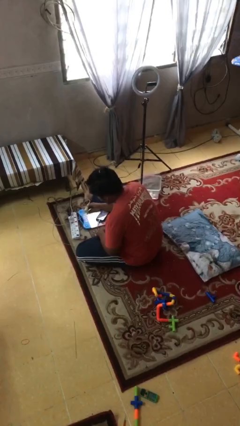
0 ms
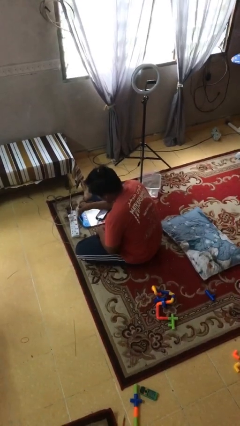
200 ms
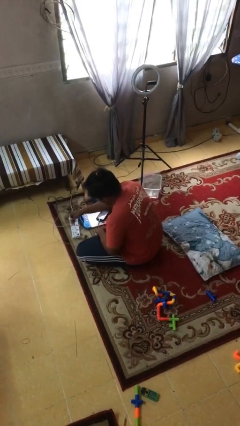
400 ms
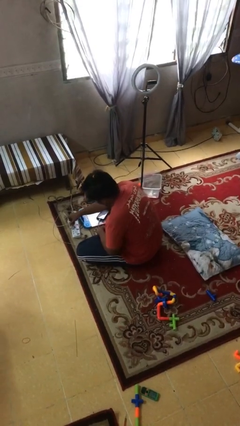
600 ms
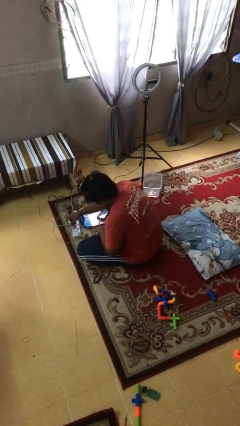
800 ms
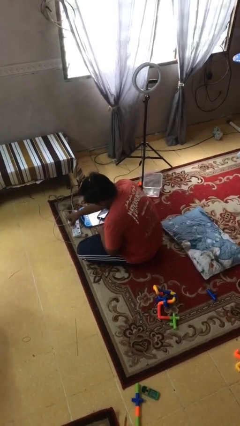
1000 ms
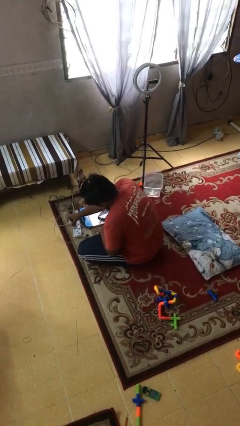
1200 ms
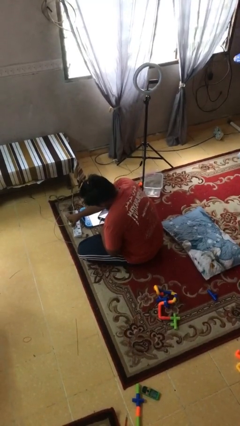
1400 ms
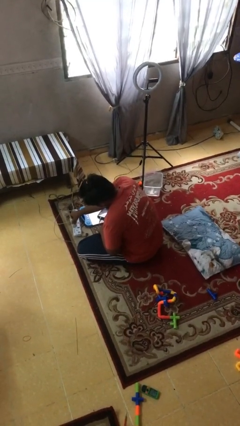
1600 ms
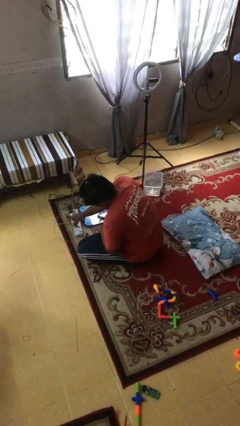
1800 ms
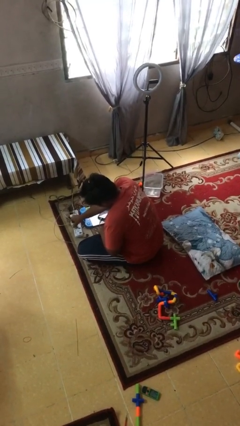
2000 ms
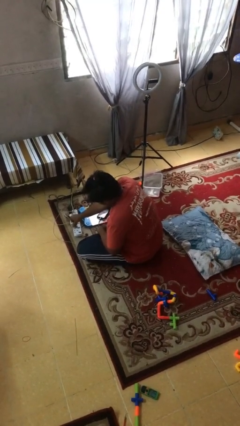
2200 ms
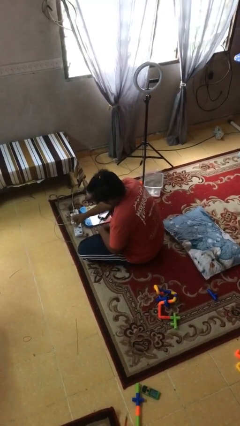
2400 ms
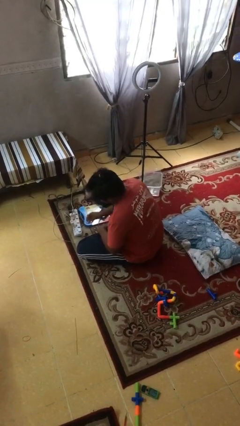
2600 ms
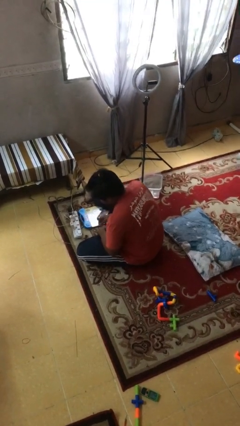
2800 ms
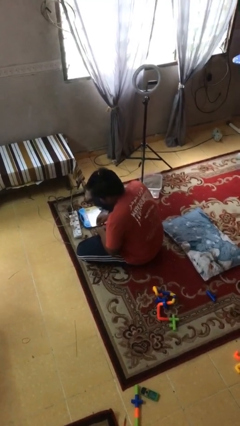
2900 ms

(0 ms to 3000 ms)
person plugs into electrical socket

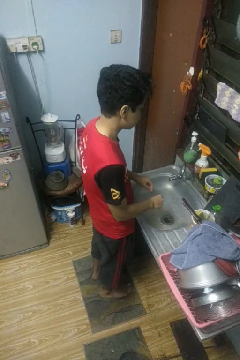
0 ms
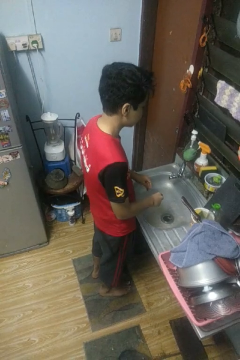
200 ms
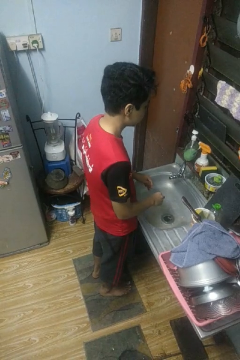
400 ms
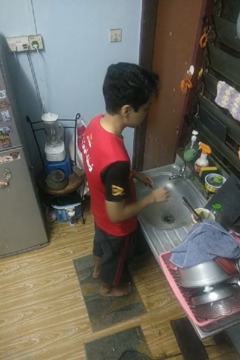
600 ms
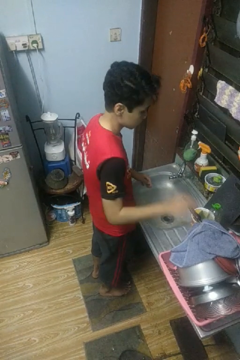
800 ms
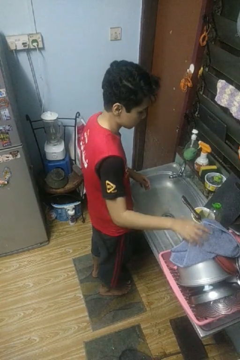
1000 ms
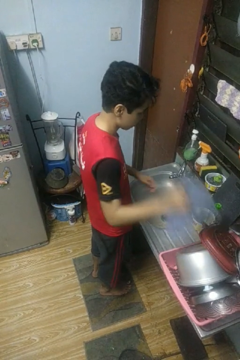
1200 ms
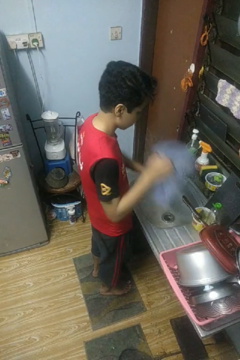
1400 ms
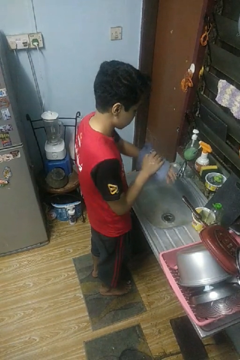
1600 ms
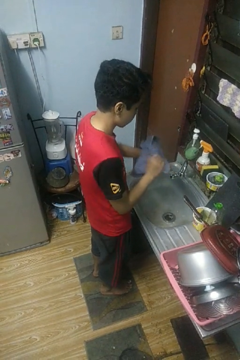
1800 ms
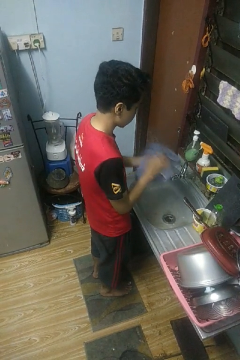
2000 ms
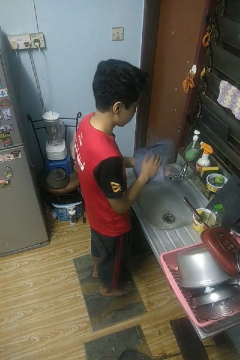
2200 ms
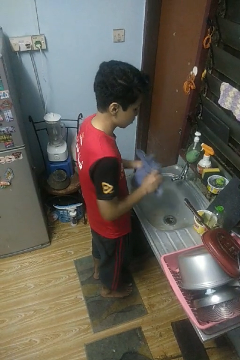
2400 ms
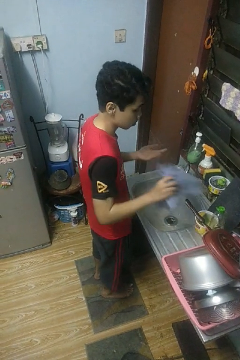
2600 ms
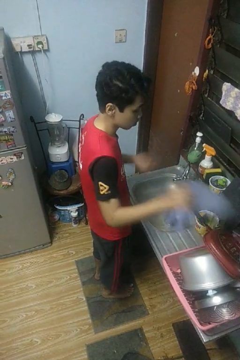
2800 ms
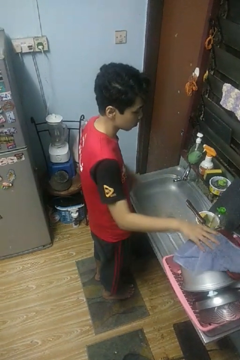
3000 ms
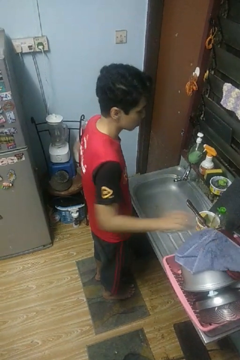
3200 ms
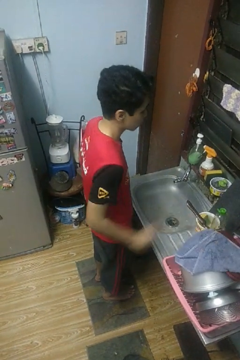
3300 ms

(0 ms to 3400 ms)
person dries hands with towel

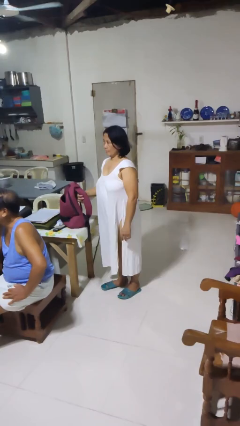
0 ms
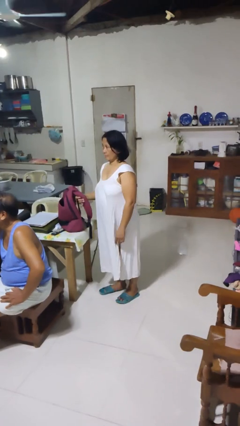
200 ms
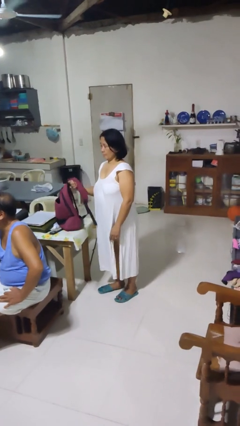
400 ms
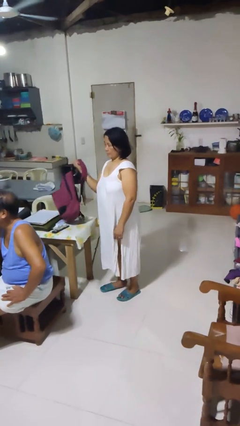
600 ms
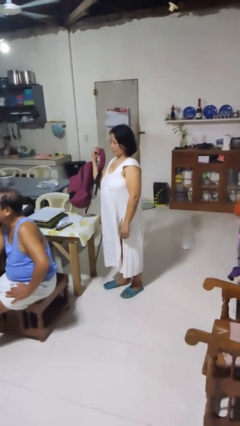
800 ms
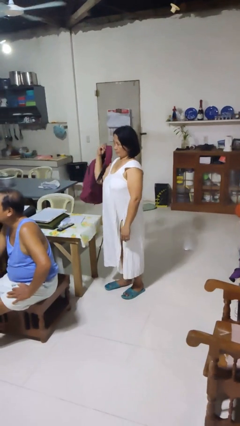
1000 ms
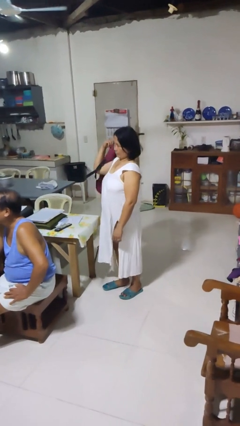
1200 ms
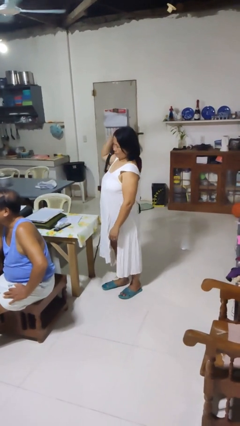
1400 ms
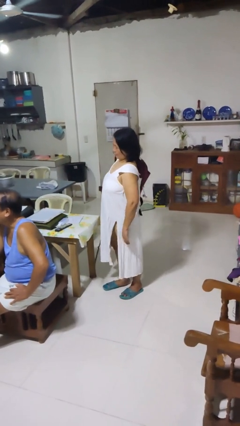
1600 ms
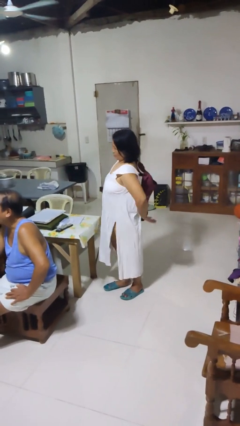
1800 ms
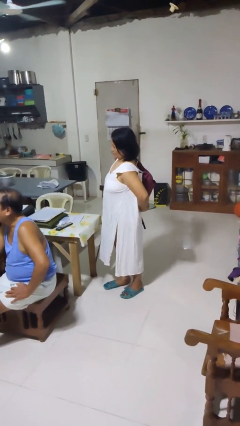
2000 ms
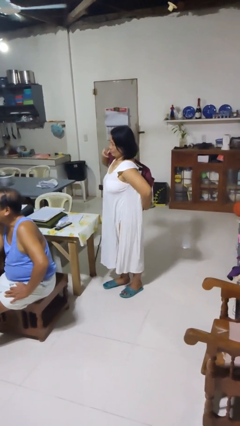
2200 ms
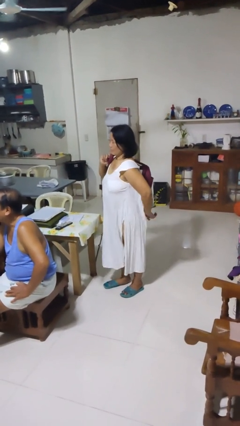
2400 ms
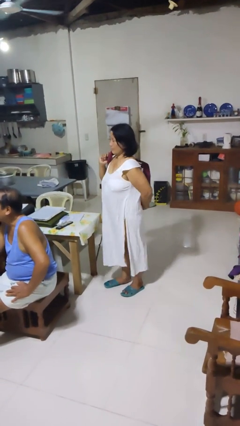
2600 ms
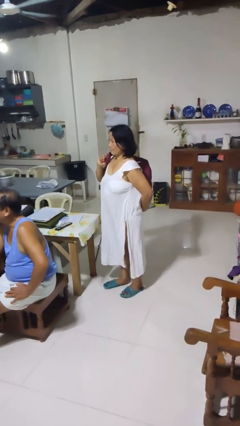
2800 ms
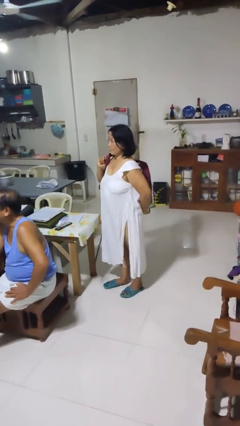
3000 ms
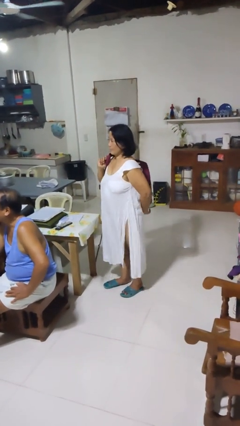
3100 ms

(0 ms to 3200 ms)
person puts on backpack

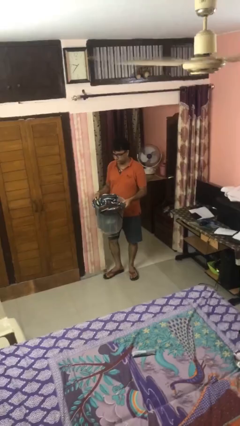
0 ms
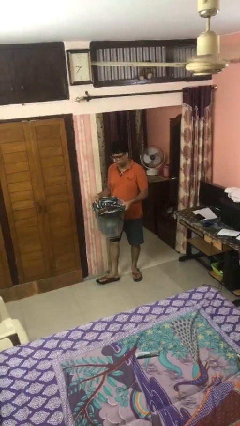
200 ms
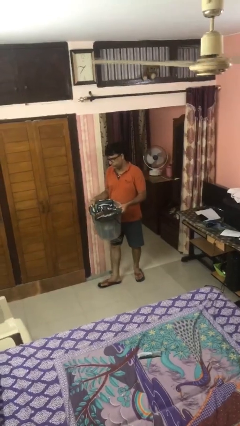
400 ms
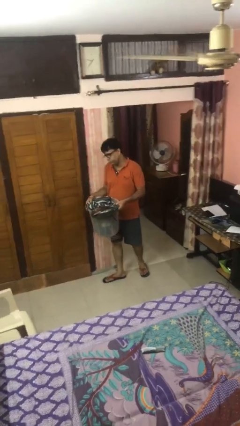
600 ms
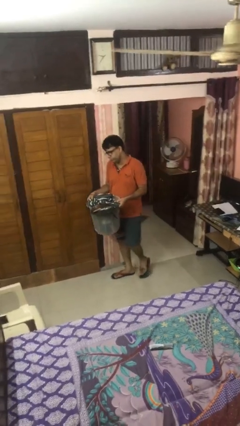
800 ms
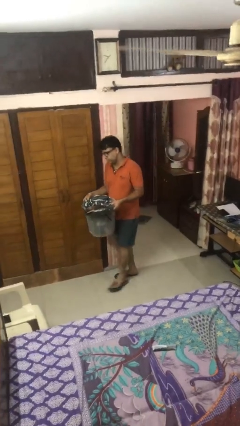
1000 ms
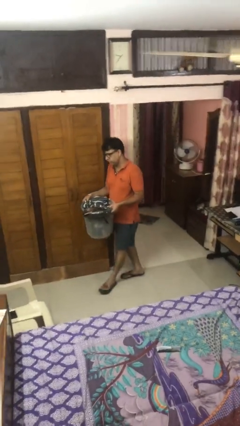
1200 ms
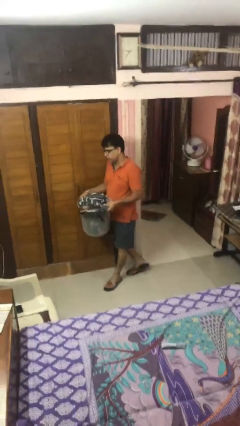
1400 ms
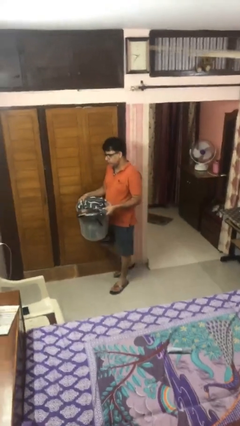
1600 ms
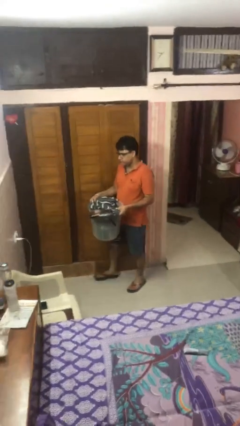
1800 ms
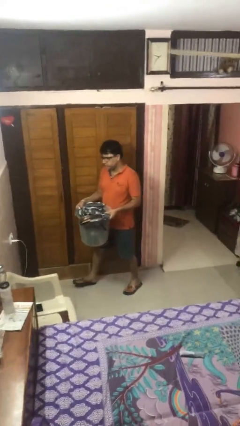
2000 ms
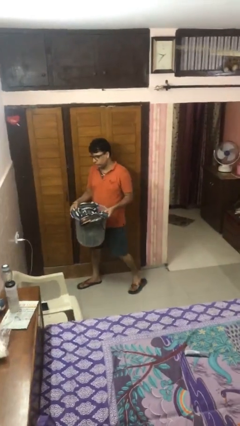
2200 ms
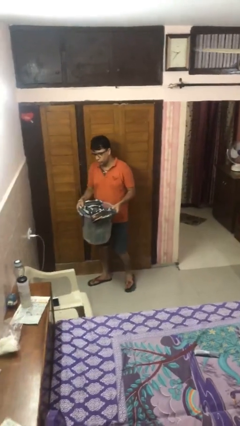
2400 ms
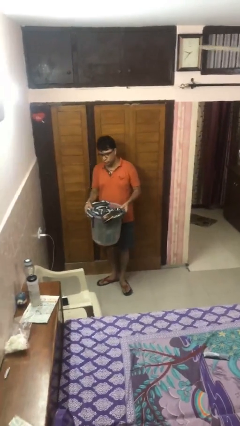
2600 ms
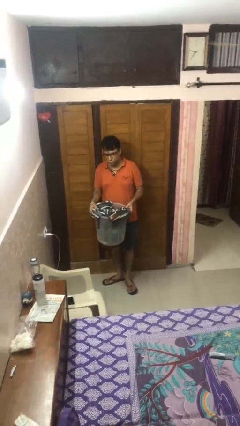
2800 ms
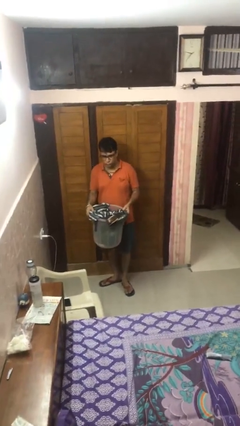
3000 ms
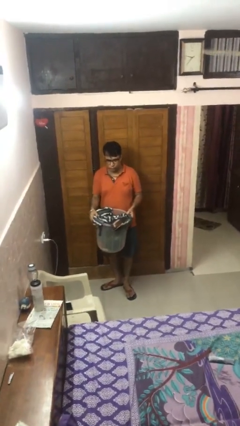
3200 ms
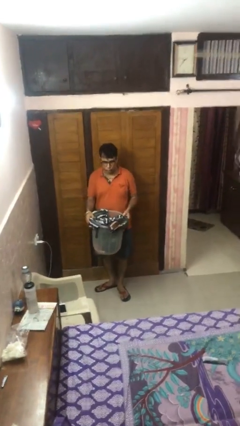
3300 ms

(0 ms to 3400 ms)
person carries laundry basket

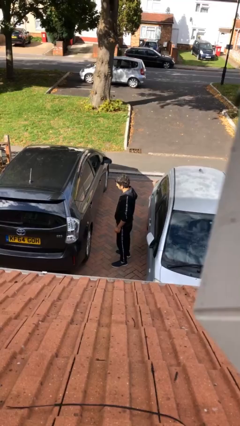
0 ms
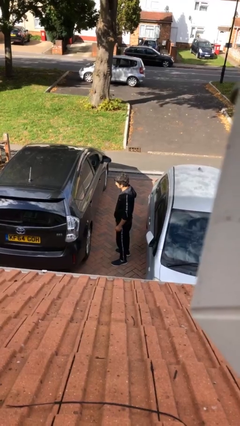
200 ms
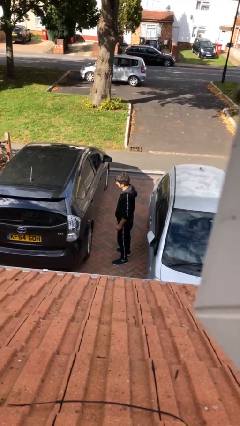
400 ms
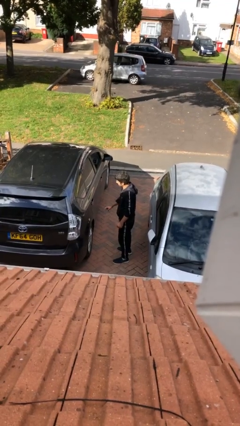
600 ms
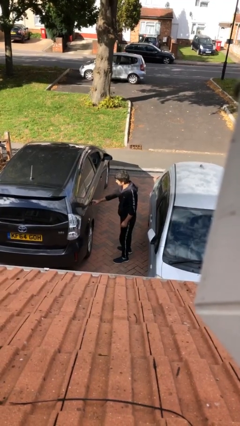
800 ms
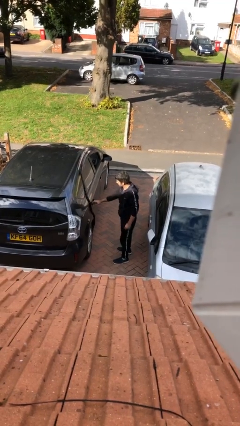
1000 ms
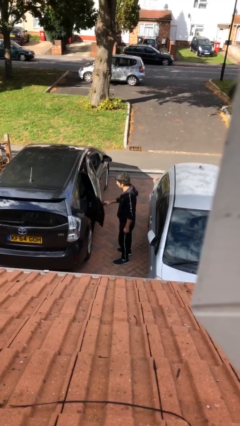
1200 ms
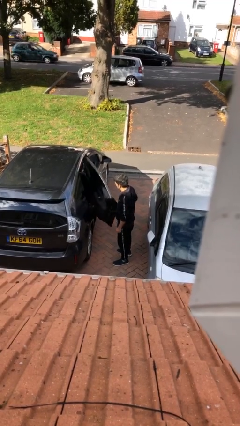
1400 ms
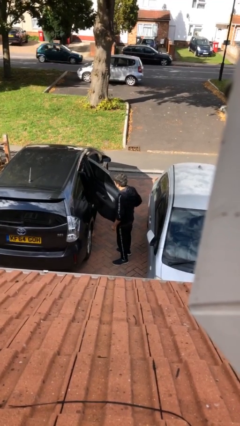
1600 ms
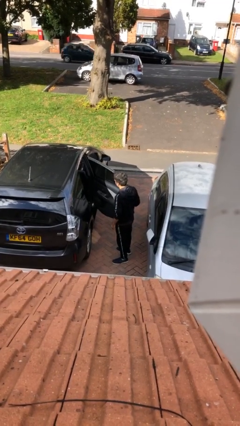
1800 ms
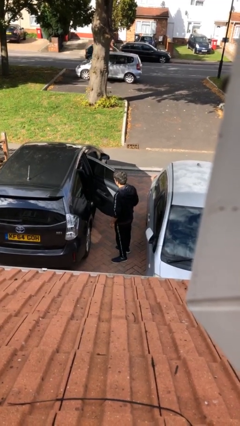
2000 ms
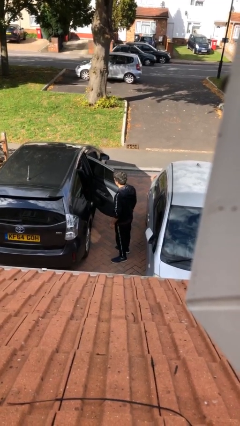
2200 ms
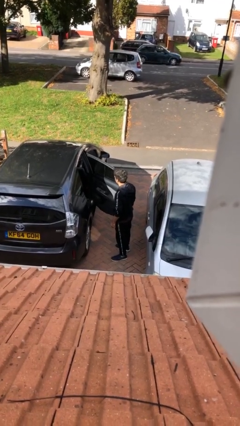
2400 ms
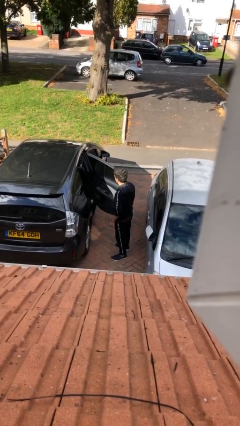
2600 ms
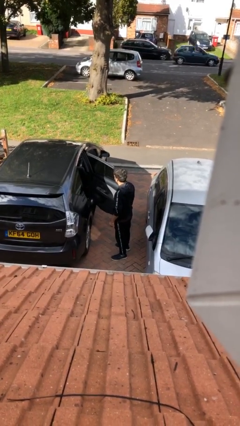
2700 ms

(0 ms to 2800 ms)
person opens car door

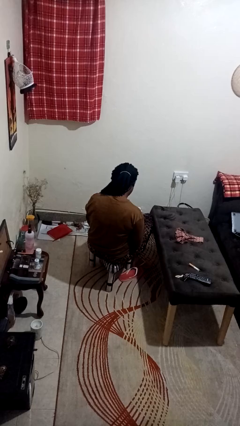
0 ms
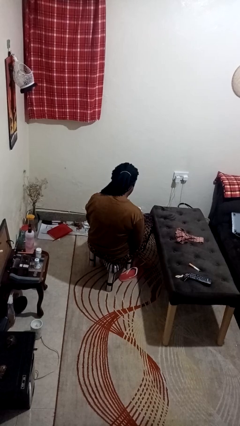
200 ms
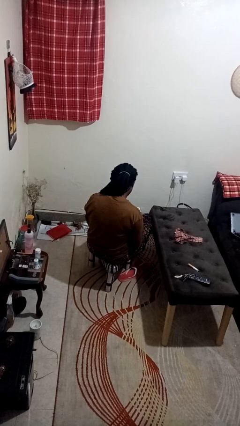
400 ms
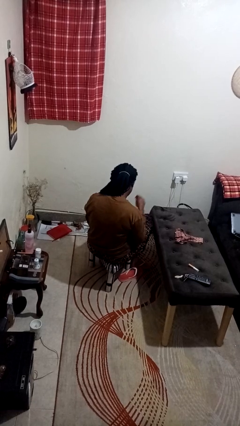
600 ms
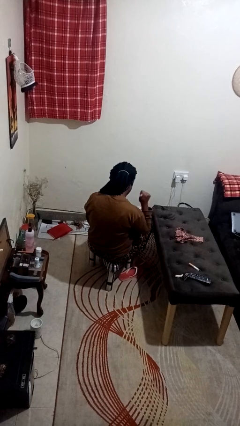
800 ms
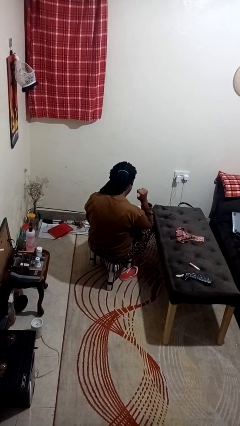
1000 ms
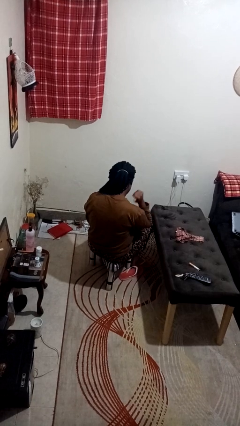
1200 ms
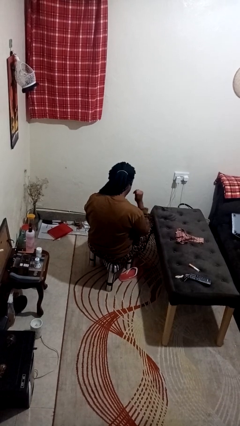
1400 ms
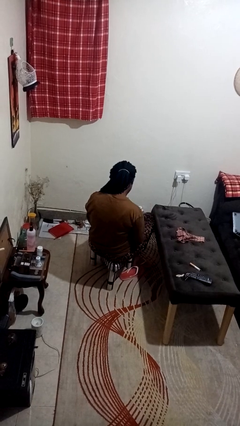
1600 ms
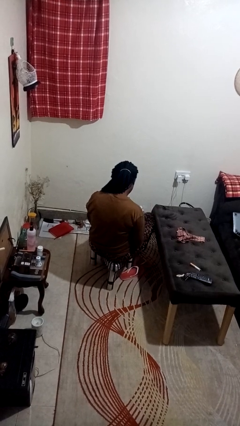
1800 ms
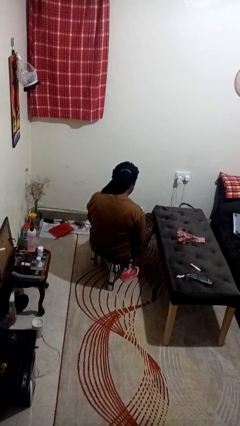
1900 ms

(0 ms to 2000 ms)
person gestures behind me

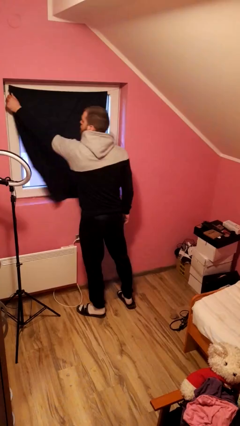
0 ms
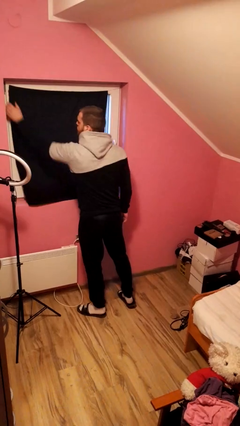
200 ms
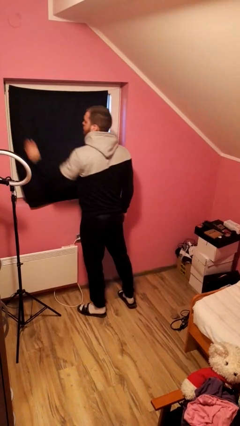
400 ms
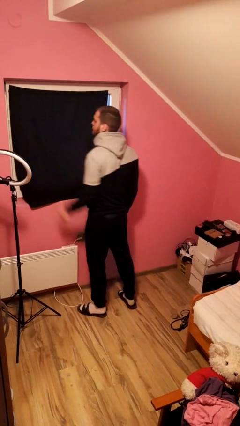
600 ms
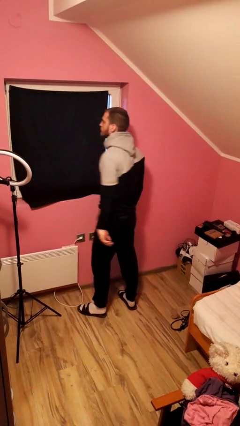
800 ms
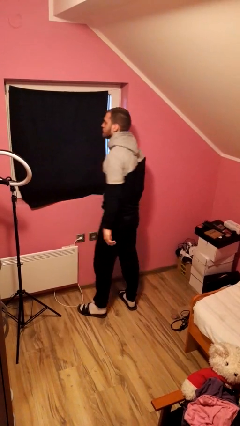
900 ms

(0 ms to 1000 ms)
person closes curtains
